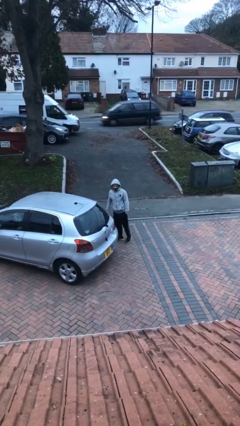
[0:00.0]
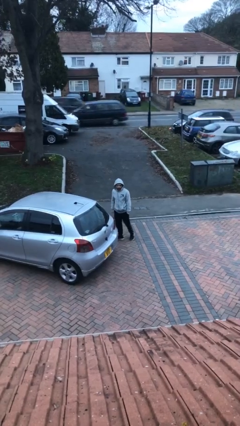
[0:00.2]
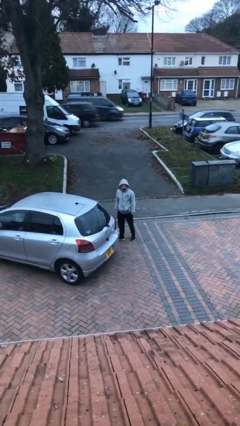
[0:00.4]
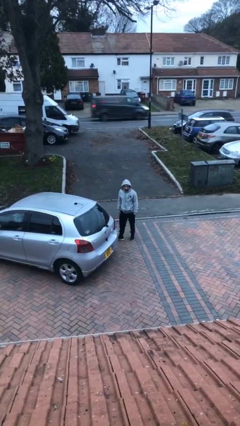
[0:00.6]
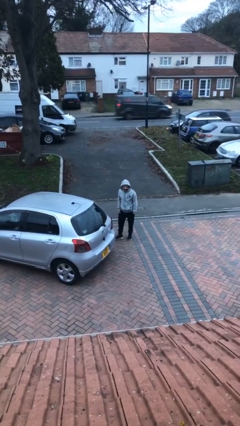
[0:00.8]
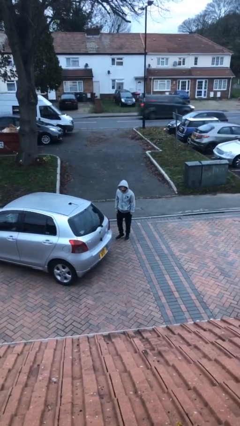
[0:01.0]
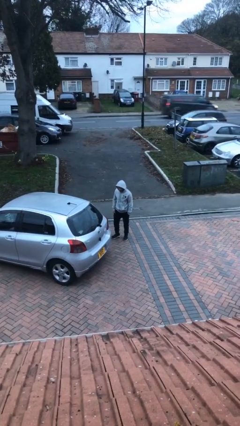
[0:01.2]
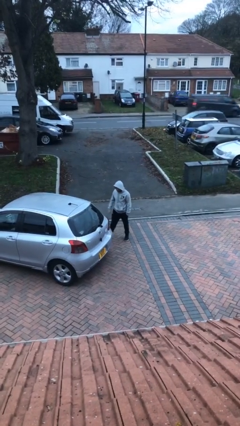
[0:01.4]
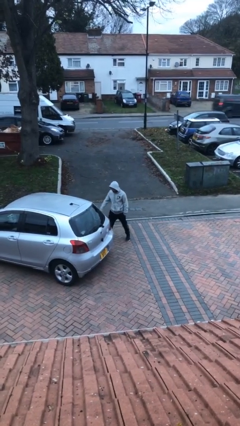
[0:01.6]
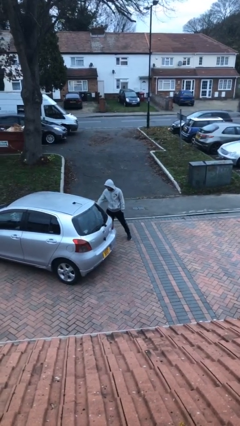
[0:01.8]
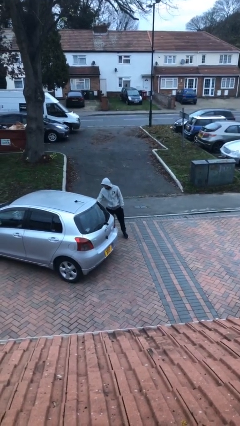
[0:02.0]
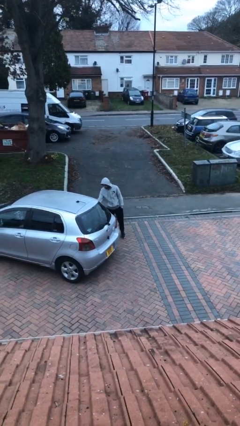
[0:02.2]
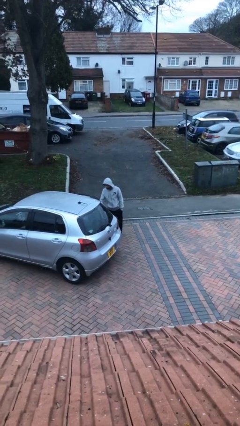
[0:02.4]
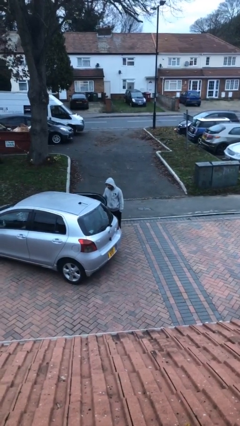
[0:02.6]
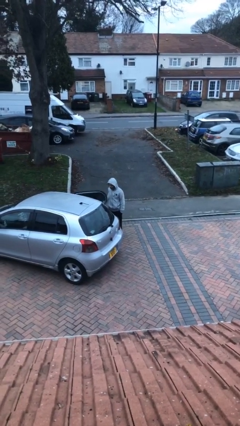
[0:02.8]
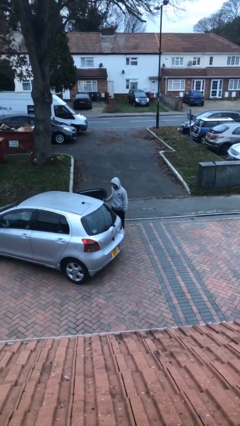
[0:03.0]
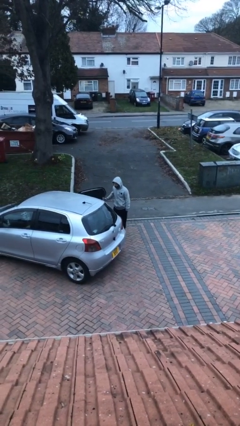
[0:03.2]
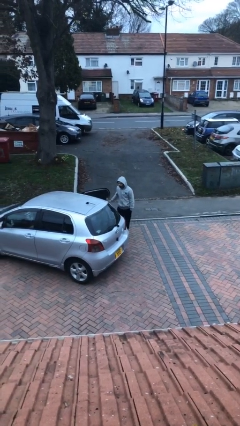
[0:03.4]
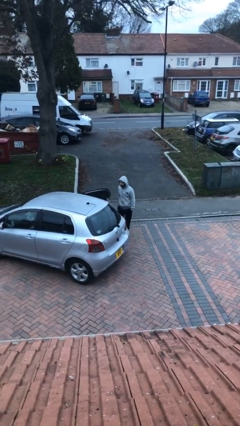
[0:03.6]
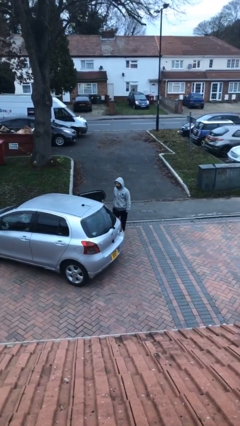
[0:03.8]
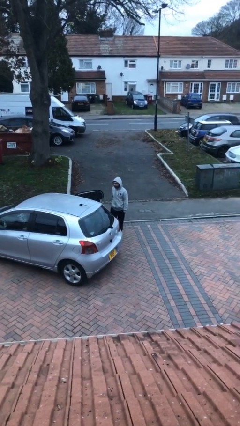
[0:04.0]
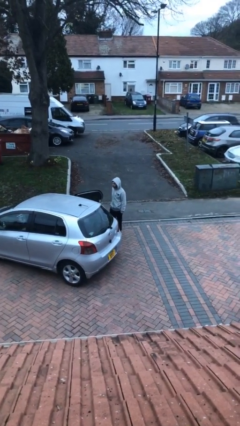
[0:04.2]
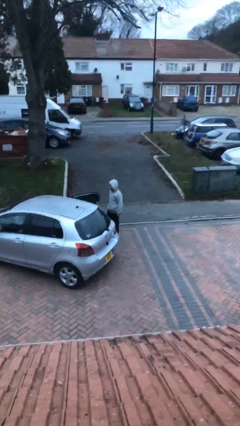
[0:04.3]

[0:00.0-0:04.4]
person opens car door

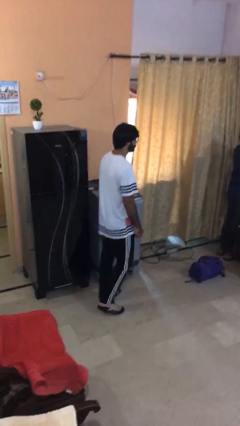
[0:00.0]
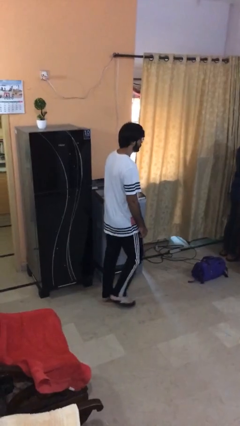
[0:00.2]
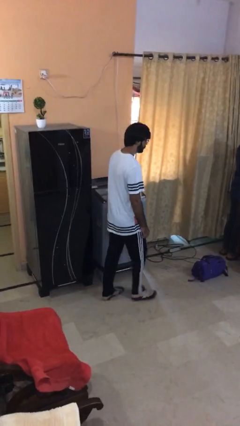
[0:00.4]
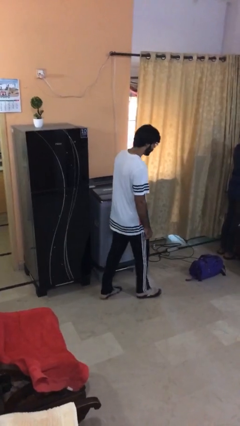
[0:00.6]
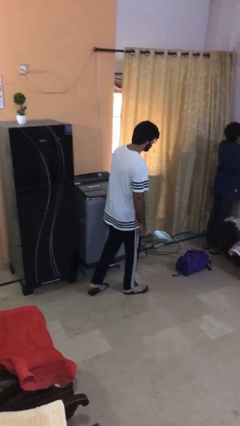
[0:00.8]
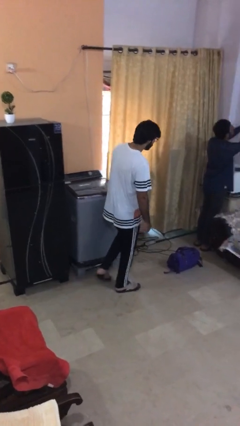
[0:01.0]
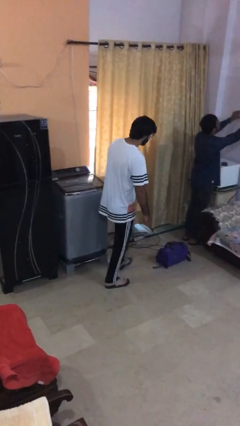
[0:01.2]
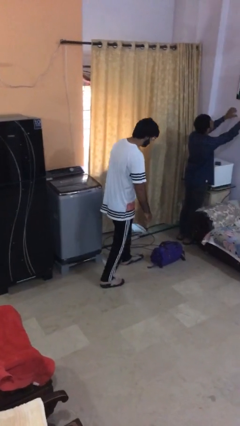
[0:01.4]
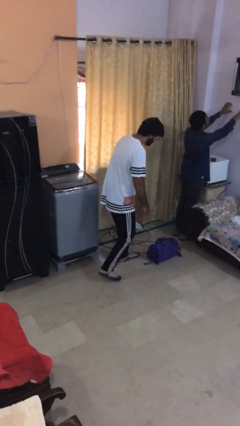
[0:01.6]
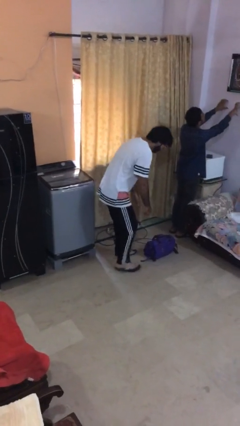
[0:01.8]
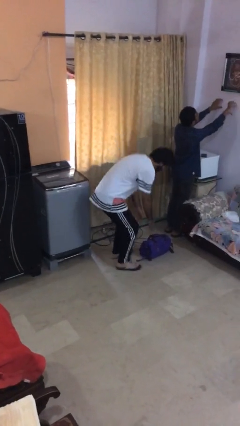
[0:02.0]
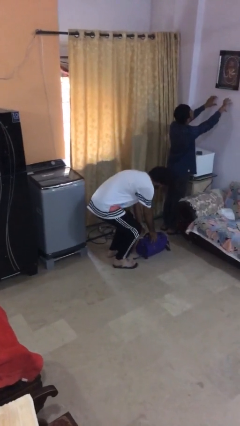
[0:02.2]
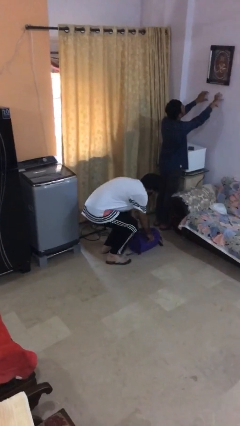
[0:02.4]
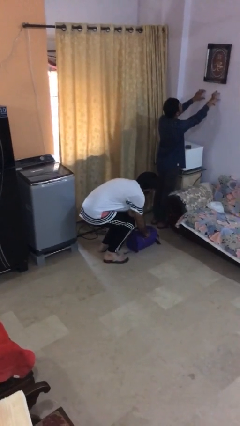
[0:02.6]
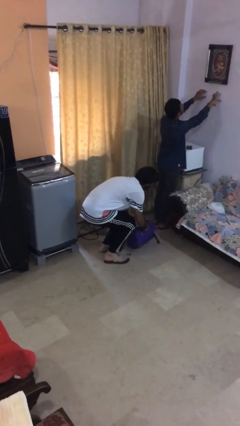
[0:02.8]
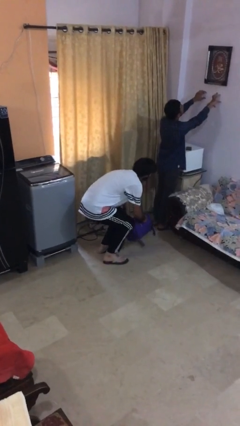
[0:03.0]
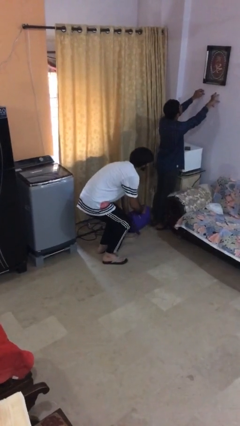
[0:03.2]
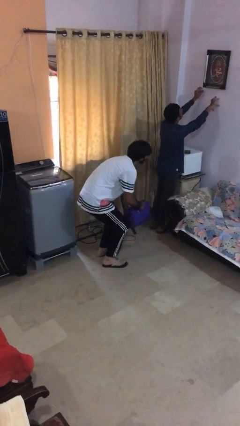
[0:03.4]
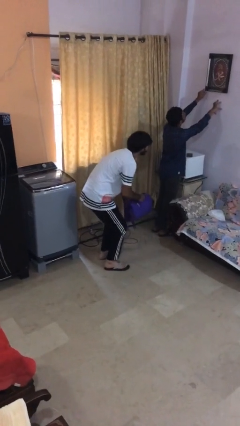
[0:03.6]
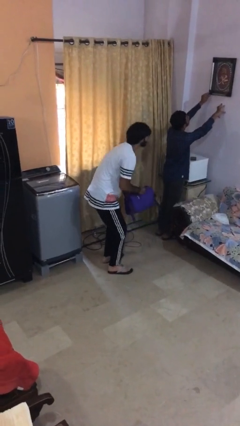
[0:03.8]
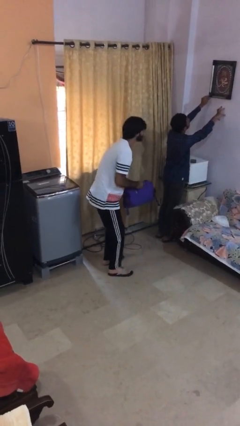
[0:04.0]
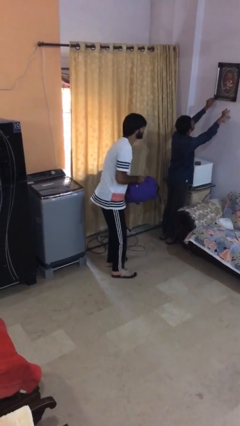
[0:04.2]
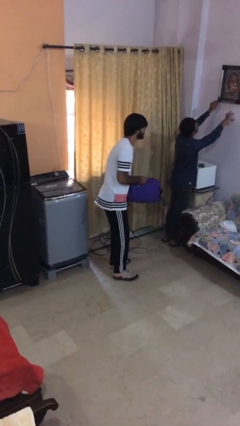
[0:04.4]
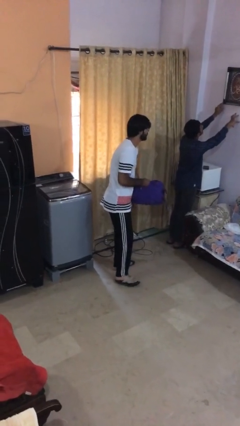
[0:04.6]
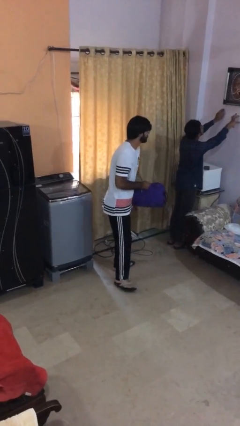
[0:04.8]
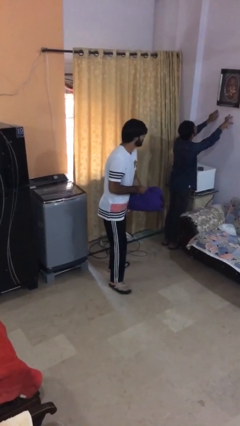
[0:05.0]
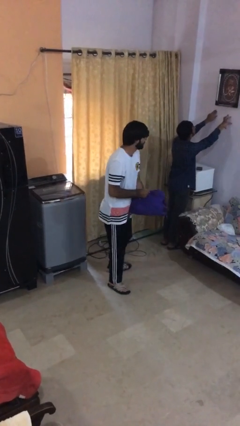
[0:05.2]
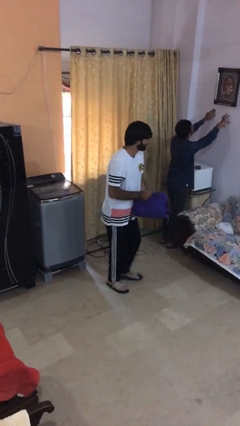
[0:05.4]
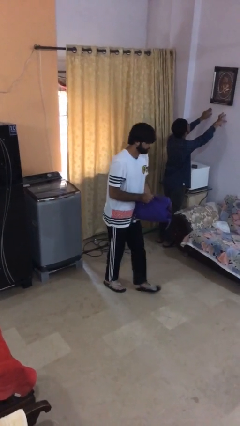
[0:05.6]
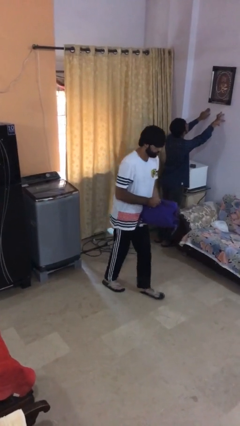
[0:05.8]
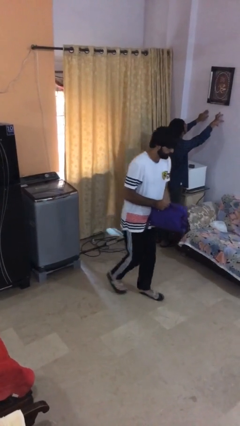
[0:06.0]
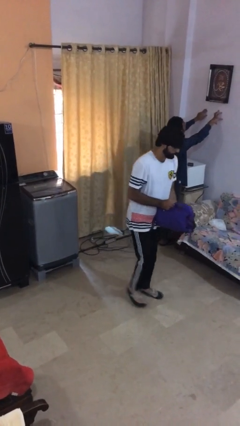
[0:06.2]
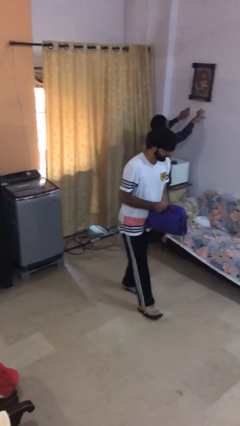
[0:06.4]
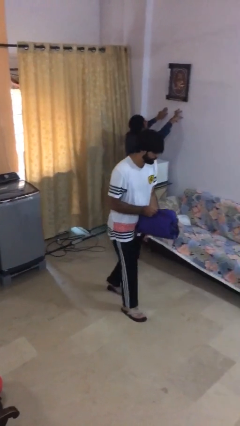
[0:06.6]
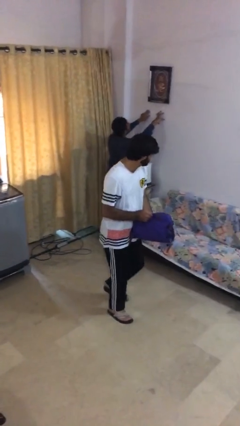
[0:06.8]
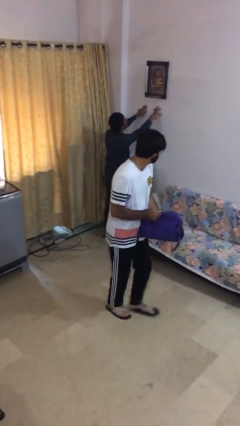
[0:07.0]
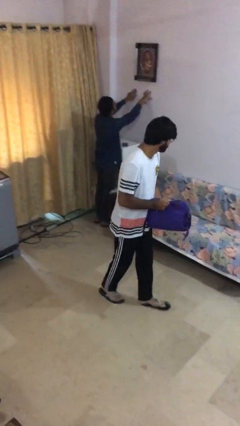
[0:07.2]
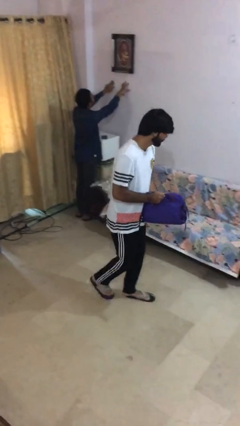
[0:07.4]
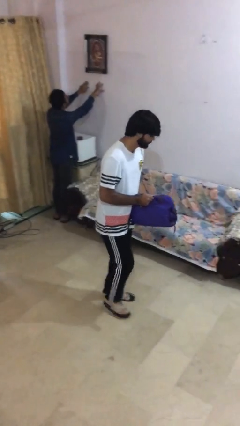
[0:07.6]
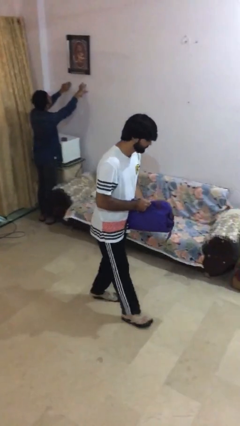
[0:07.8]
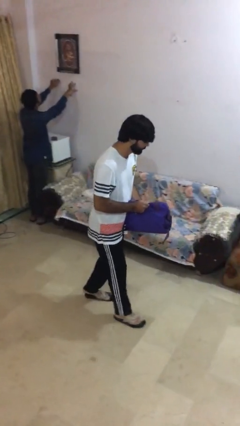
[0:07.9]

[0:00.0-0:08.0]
person steals object from person

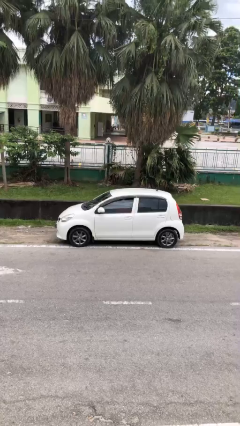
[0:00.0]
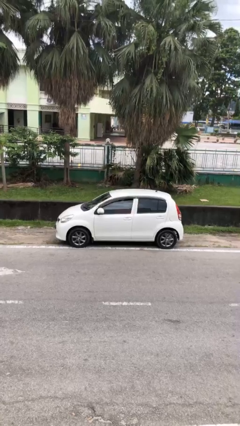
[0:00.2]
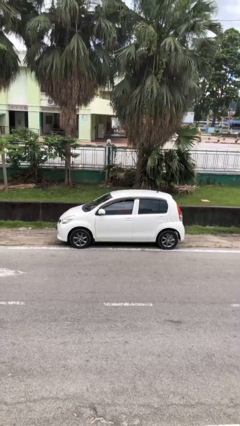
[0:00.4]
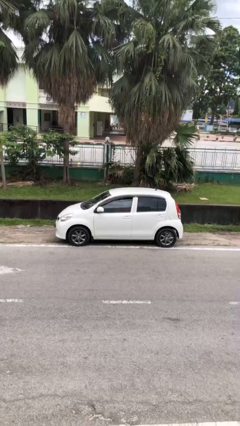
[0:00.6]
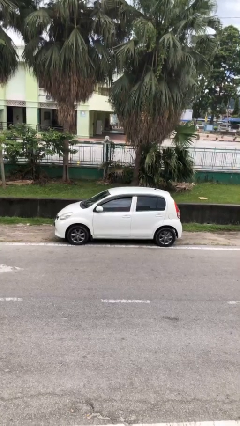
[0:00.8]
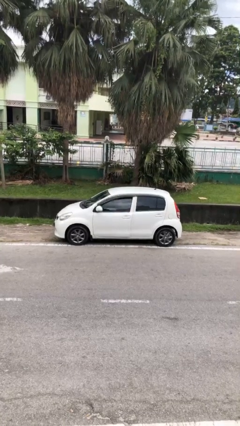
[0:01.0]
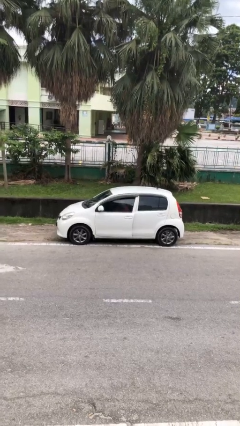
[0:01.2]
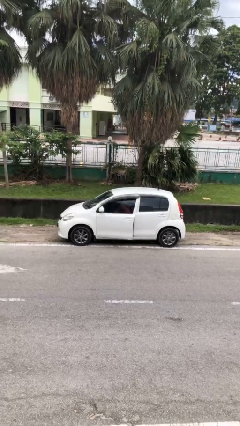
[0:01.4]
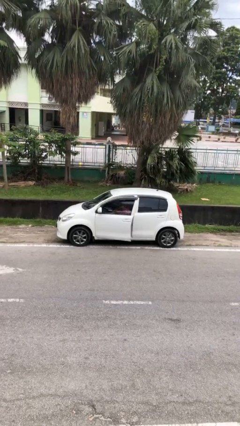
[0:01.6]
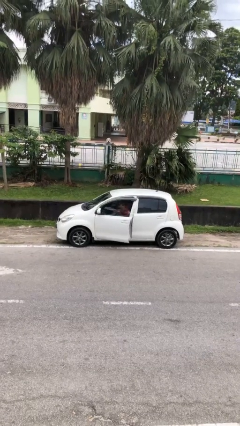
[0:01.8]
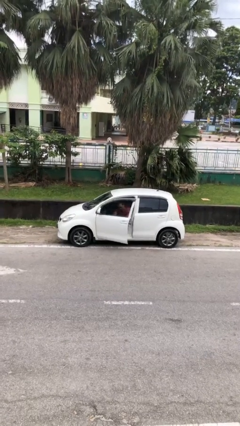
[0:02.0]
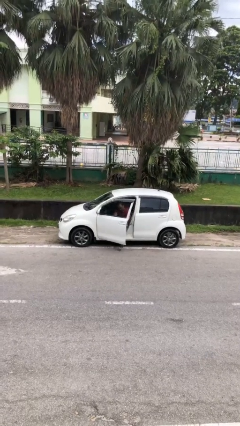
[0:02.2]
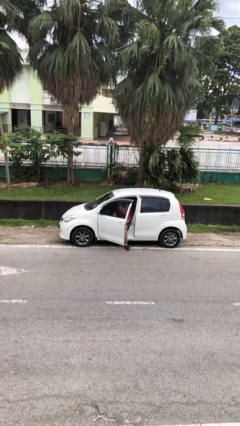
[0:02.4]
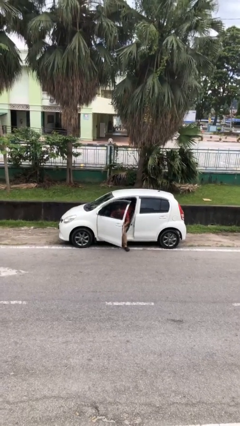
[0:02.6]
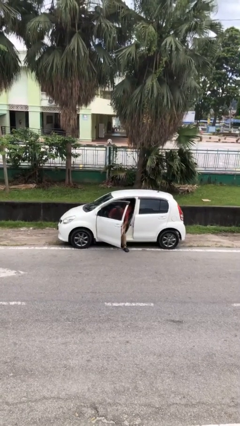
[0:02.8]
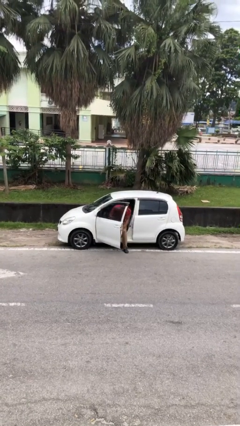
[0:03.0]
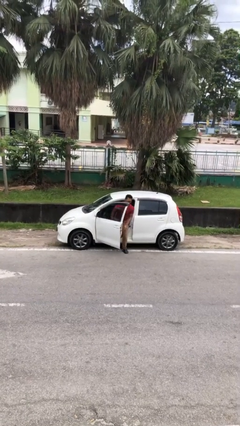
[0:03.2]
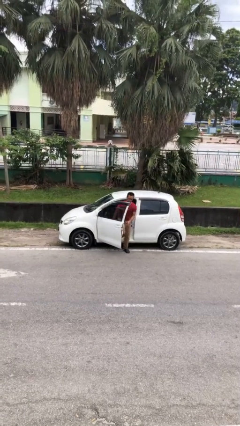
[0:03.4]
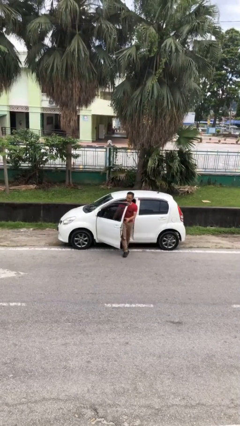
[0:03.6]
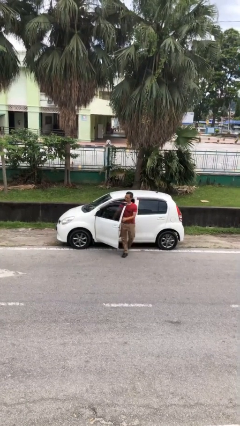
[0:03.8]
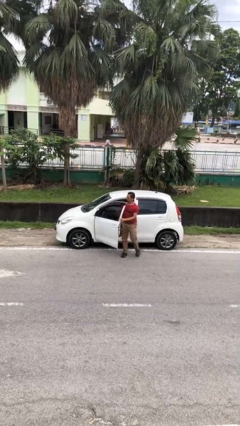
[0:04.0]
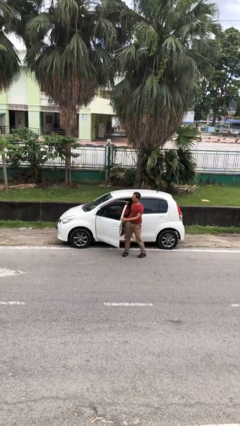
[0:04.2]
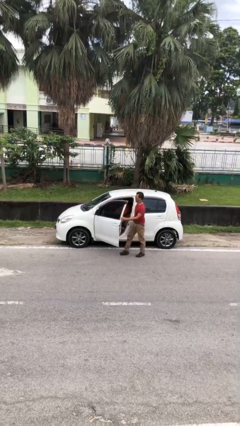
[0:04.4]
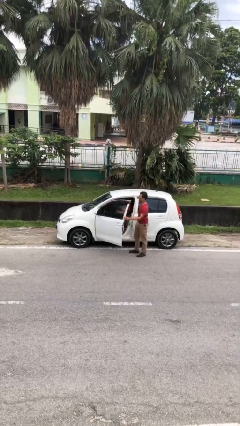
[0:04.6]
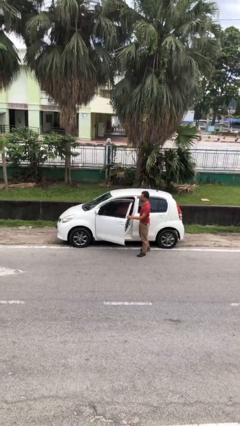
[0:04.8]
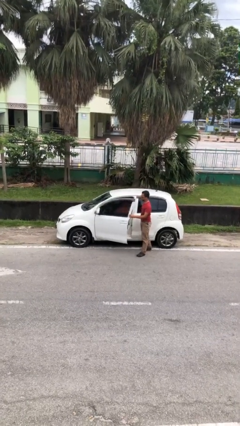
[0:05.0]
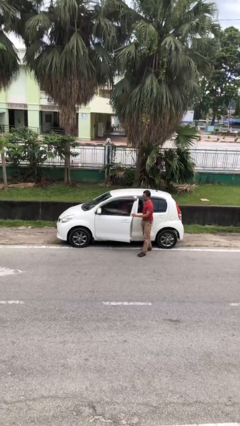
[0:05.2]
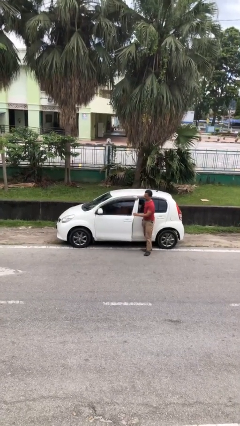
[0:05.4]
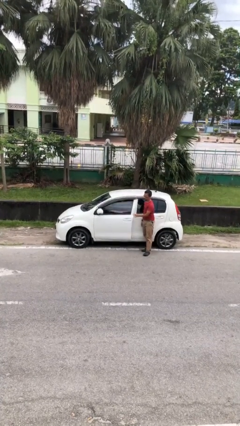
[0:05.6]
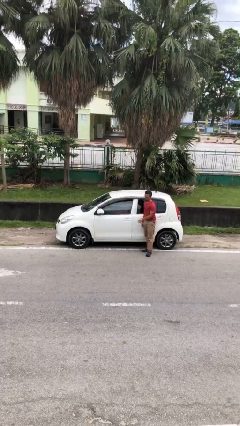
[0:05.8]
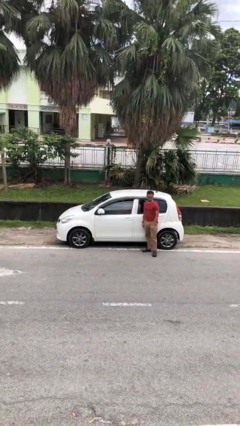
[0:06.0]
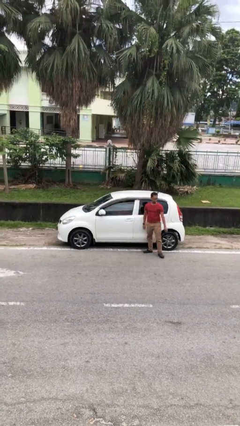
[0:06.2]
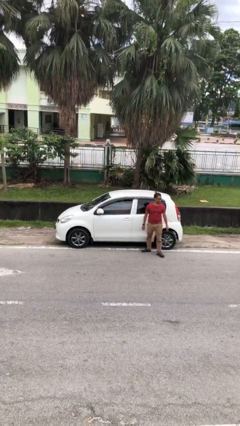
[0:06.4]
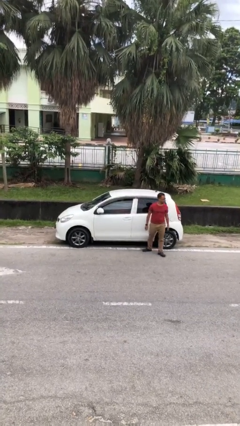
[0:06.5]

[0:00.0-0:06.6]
car drops off person
